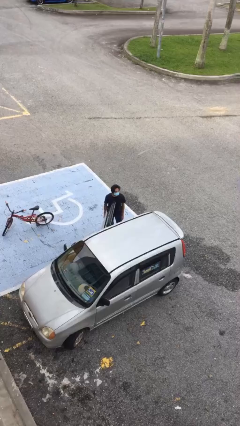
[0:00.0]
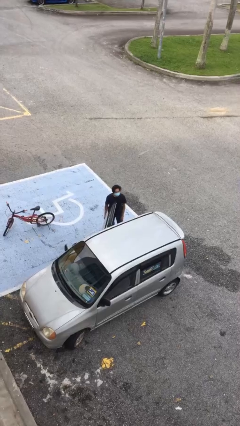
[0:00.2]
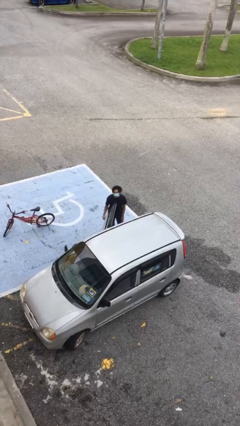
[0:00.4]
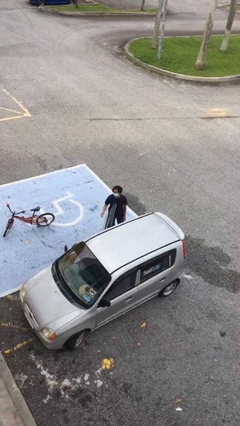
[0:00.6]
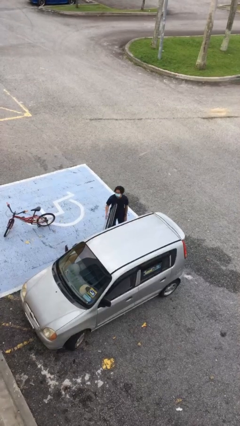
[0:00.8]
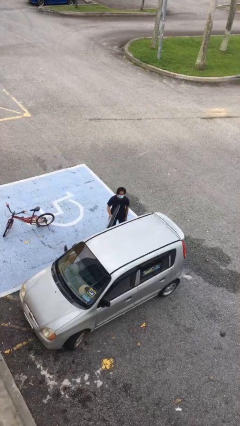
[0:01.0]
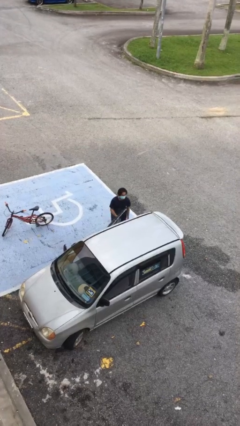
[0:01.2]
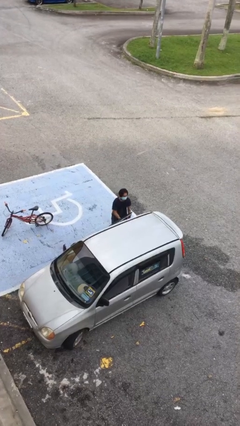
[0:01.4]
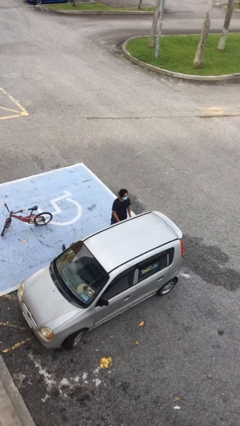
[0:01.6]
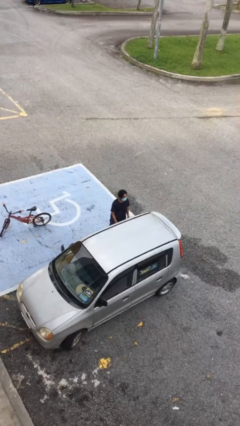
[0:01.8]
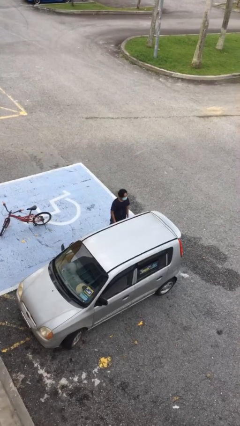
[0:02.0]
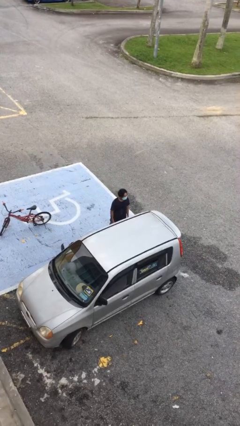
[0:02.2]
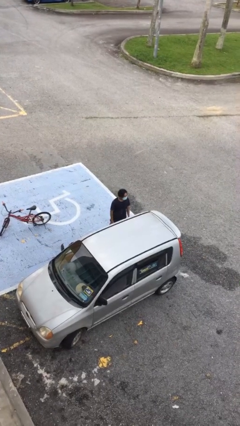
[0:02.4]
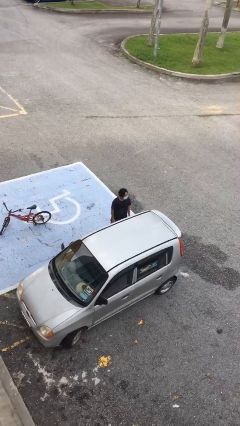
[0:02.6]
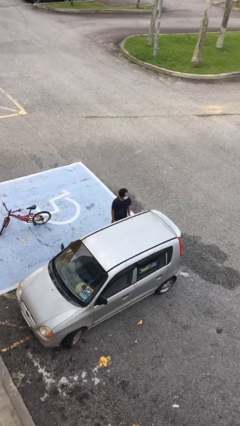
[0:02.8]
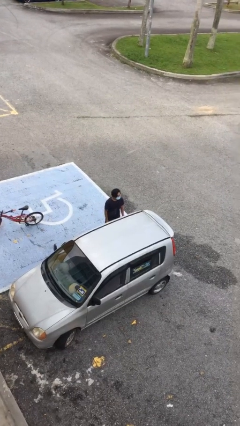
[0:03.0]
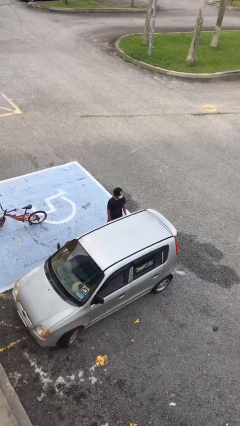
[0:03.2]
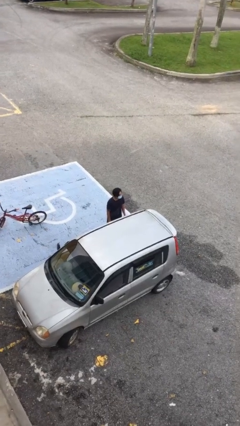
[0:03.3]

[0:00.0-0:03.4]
person closes car door

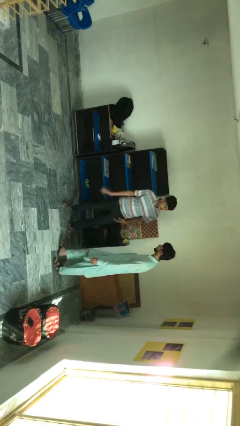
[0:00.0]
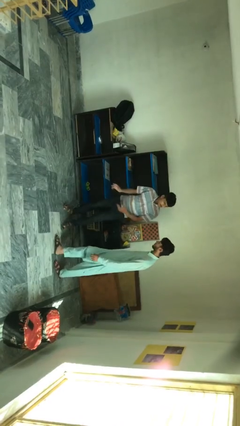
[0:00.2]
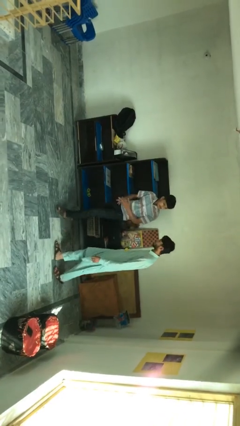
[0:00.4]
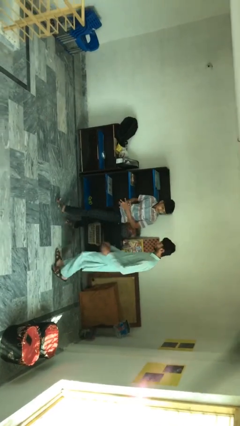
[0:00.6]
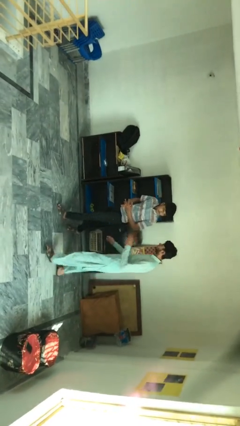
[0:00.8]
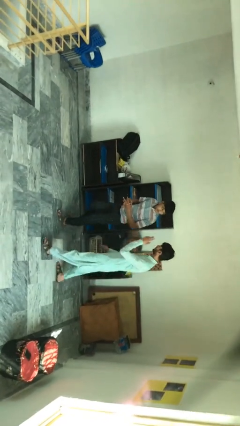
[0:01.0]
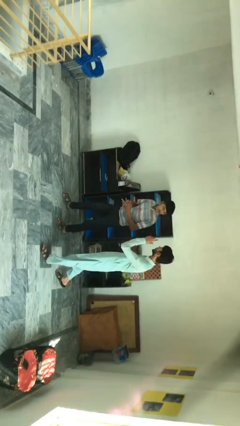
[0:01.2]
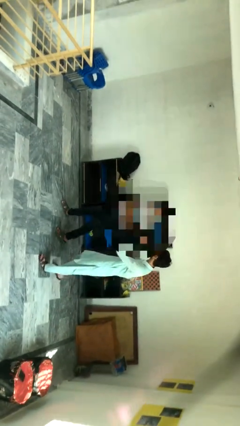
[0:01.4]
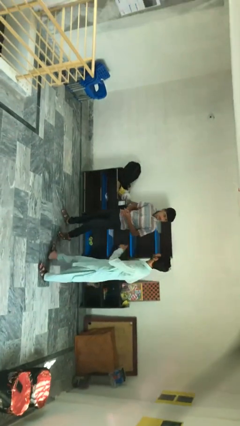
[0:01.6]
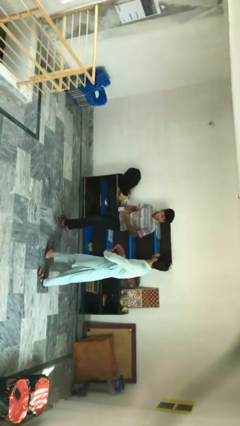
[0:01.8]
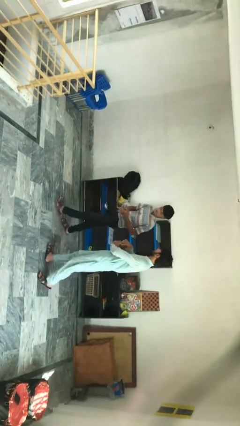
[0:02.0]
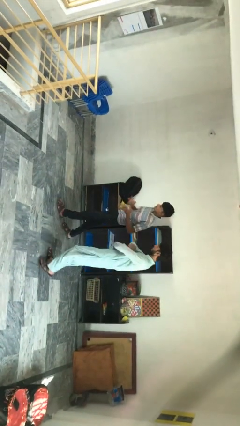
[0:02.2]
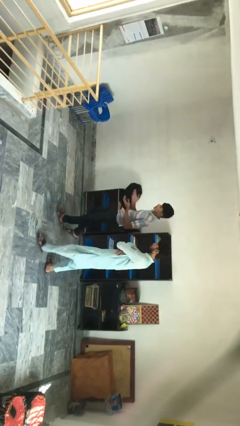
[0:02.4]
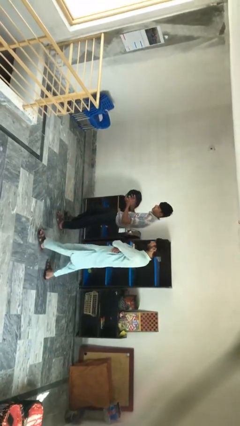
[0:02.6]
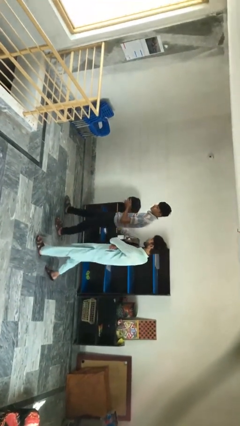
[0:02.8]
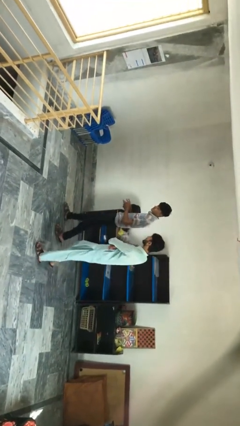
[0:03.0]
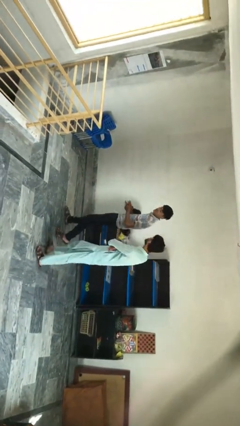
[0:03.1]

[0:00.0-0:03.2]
person talks to person

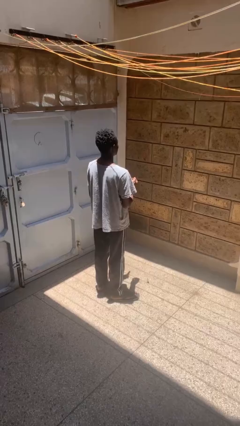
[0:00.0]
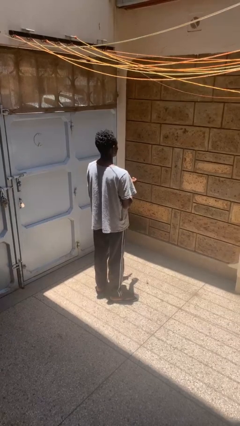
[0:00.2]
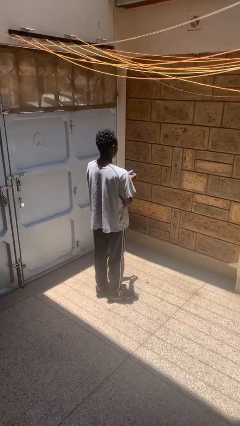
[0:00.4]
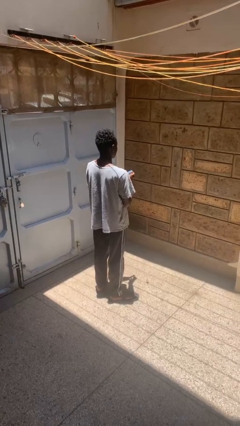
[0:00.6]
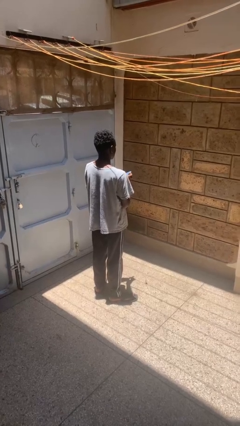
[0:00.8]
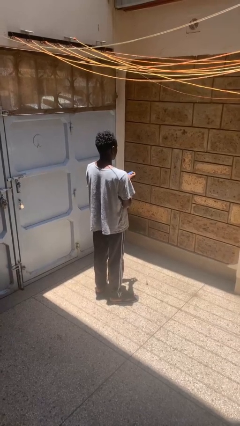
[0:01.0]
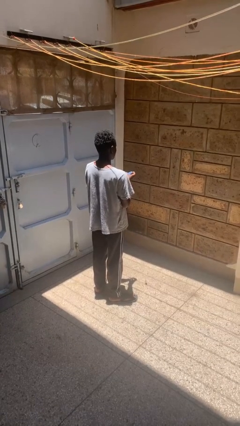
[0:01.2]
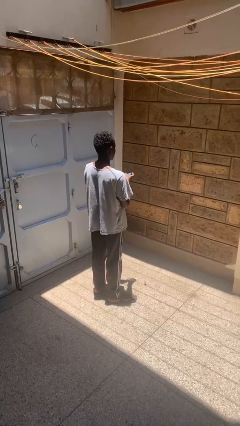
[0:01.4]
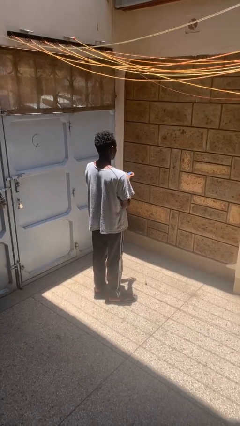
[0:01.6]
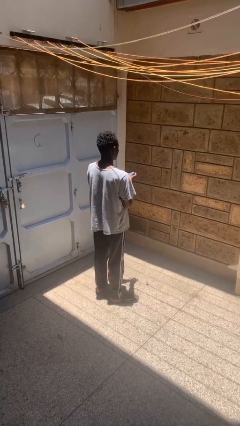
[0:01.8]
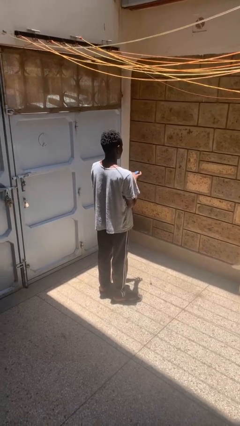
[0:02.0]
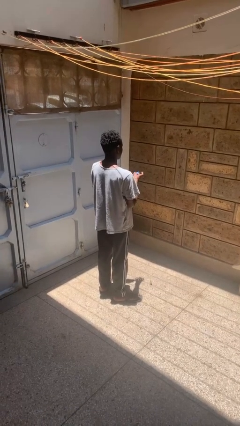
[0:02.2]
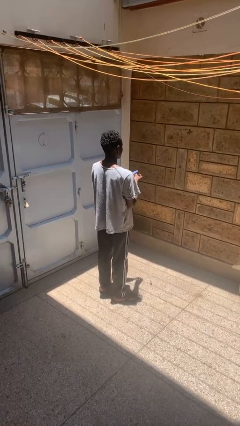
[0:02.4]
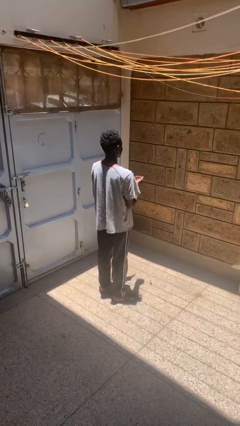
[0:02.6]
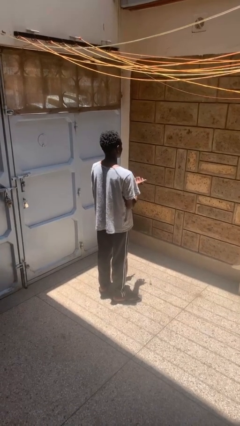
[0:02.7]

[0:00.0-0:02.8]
person files fingernails

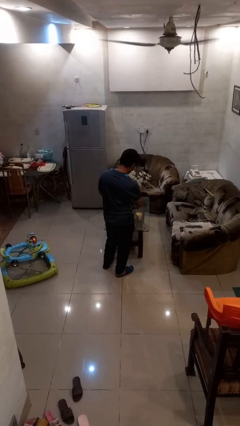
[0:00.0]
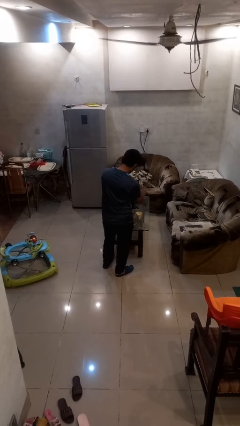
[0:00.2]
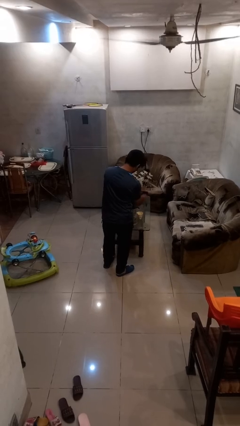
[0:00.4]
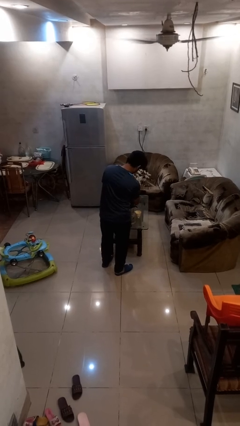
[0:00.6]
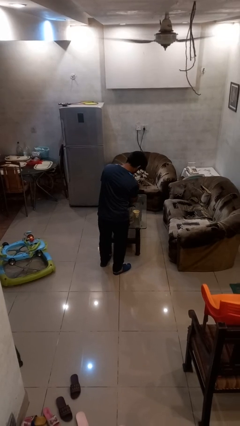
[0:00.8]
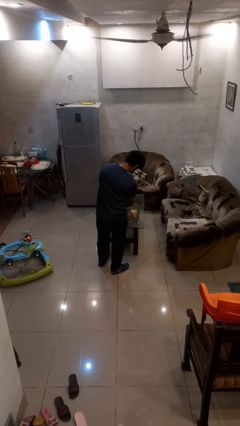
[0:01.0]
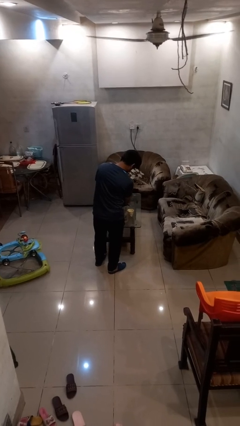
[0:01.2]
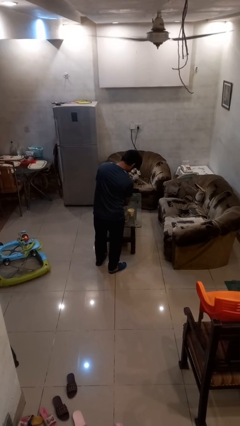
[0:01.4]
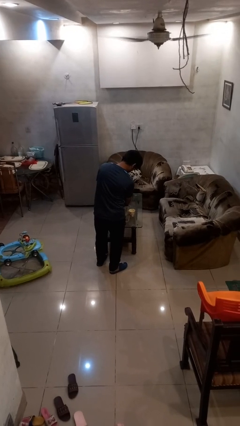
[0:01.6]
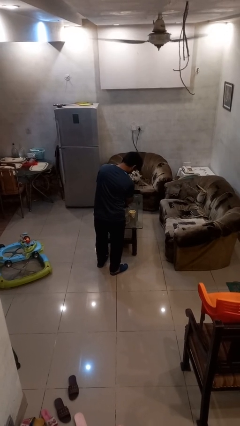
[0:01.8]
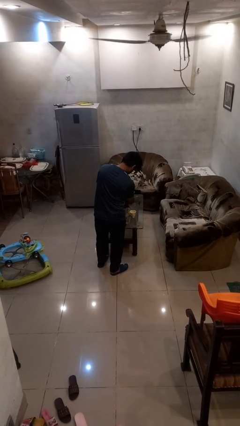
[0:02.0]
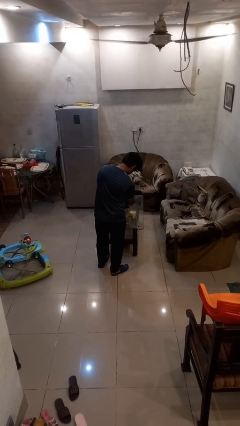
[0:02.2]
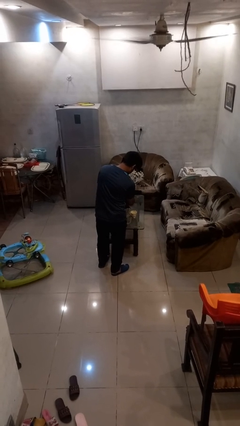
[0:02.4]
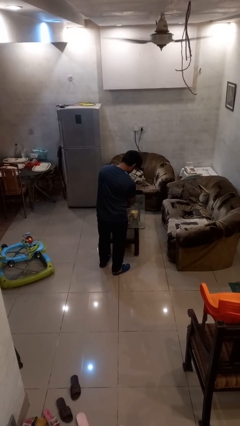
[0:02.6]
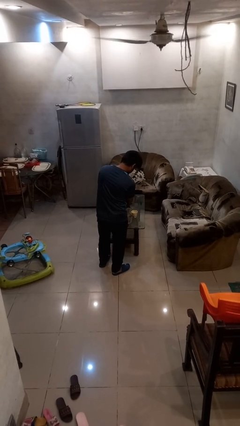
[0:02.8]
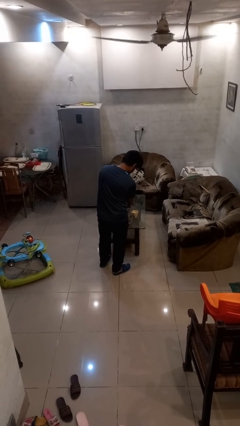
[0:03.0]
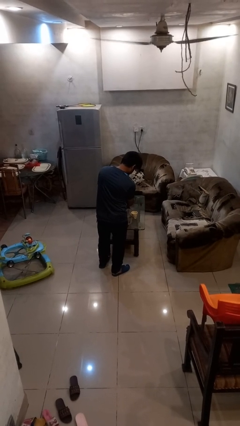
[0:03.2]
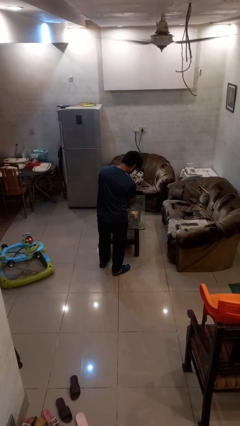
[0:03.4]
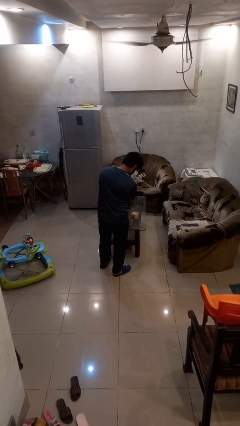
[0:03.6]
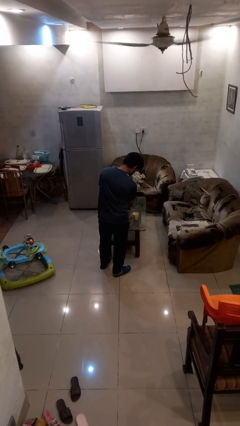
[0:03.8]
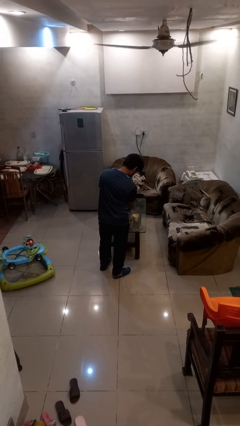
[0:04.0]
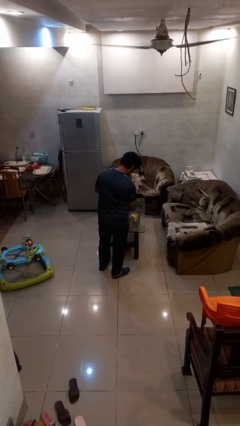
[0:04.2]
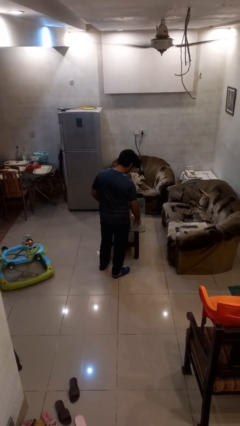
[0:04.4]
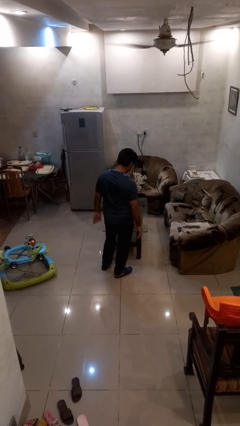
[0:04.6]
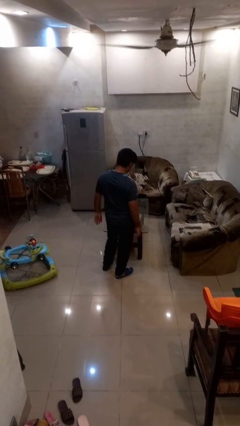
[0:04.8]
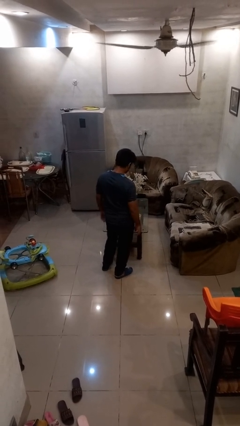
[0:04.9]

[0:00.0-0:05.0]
person arranges flowers in vase

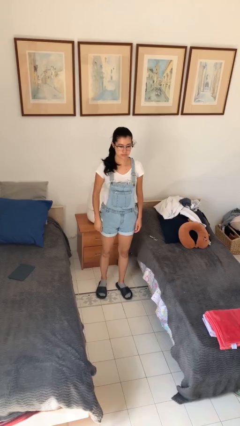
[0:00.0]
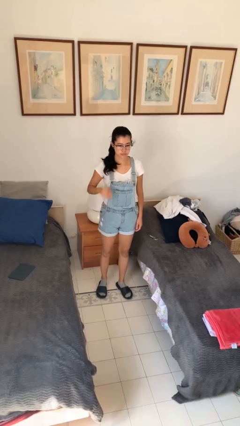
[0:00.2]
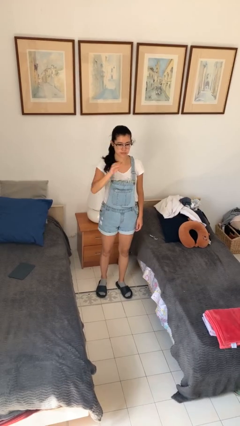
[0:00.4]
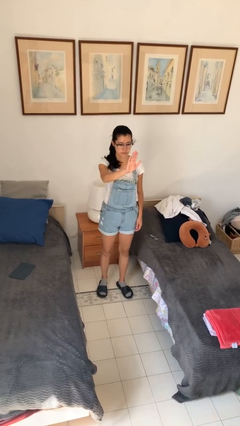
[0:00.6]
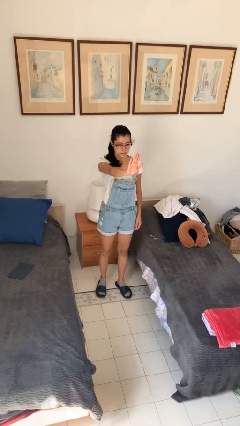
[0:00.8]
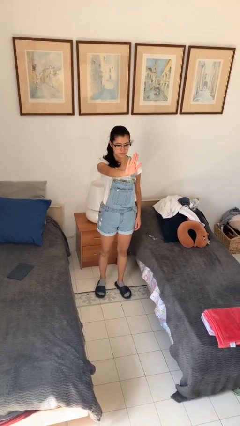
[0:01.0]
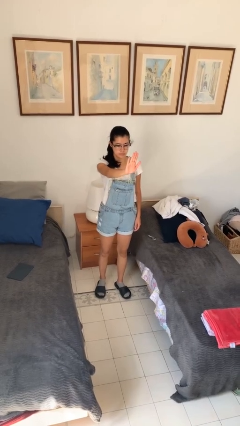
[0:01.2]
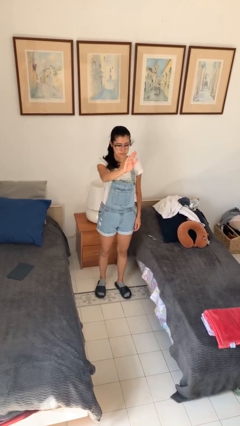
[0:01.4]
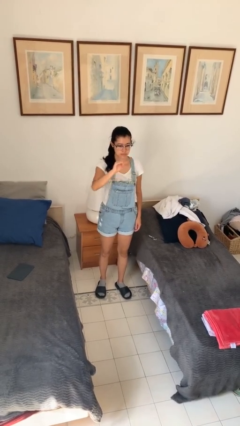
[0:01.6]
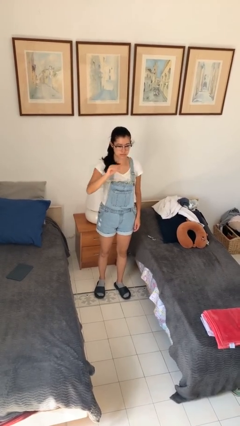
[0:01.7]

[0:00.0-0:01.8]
person gestures stop

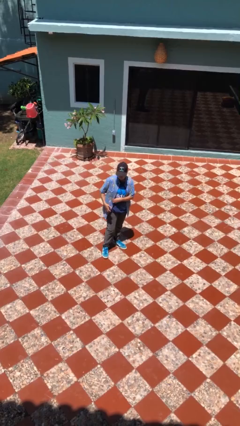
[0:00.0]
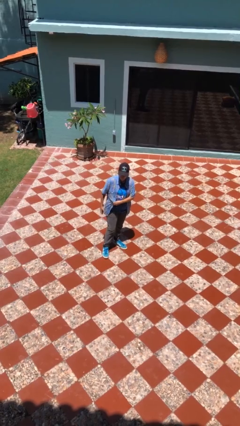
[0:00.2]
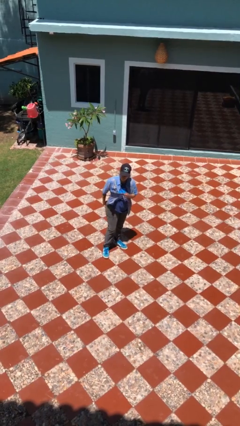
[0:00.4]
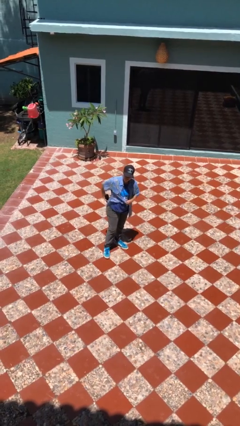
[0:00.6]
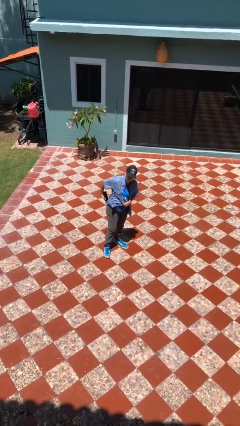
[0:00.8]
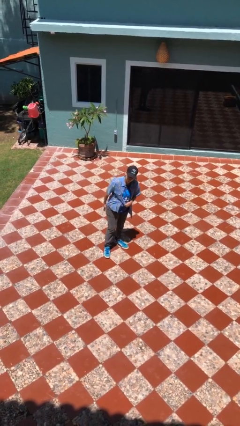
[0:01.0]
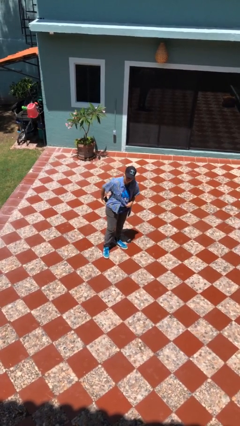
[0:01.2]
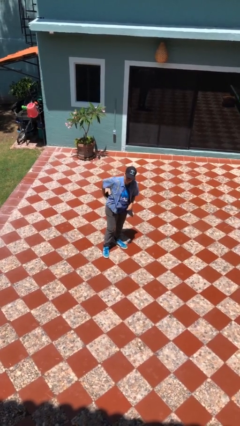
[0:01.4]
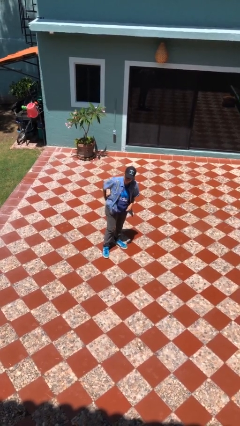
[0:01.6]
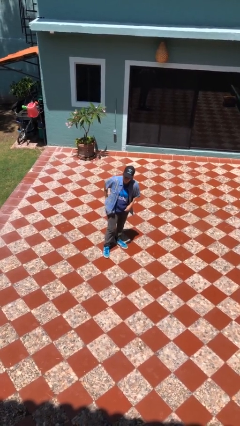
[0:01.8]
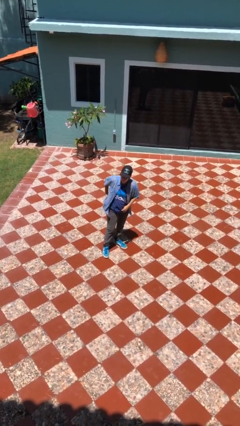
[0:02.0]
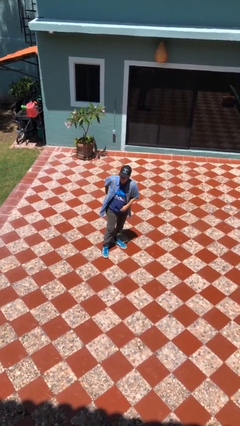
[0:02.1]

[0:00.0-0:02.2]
person puts phone into pocket
